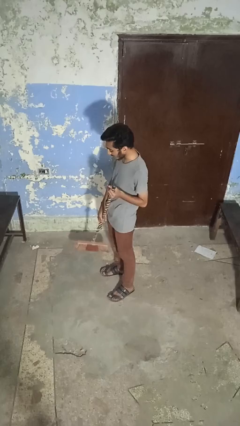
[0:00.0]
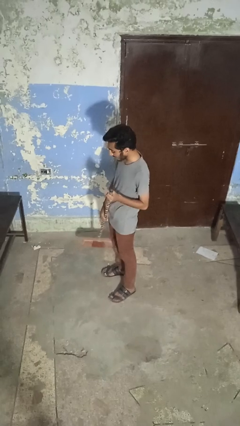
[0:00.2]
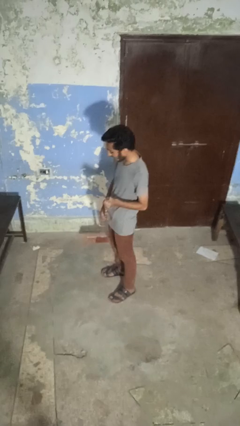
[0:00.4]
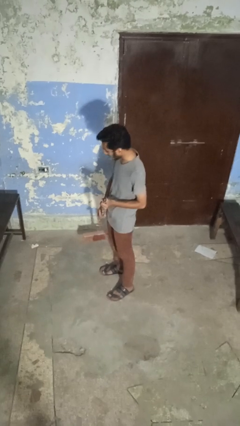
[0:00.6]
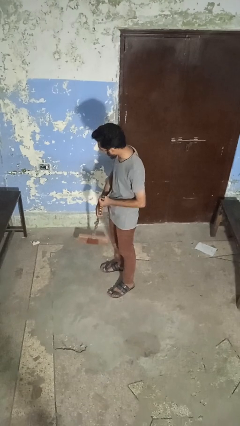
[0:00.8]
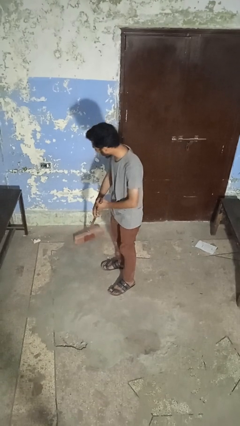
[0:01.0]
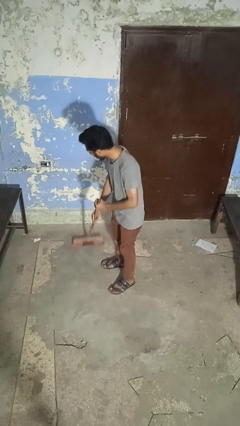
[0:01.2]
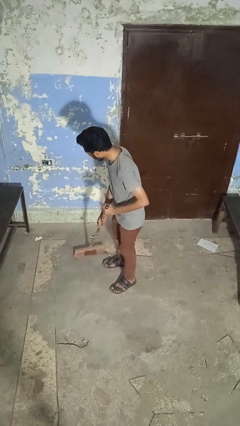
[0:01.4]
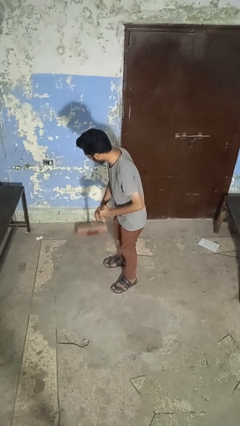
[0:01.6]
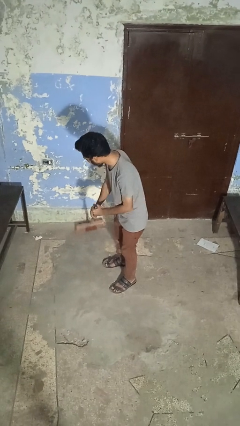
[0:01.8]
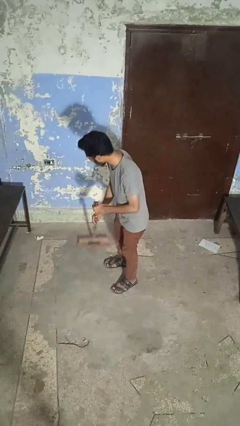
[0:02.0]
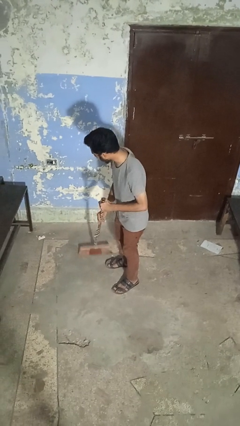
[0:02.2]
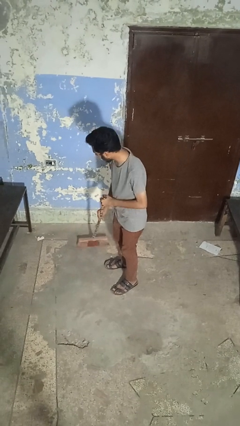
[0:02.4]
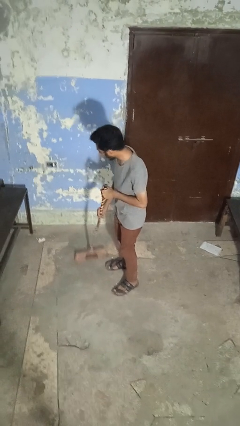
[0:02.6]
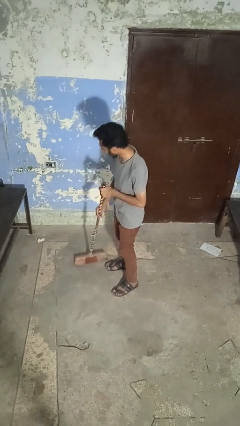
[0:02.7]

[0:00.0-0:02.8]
person sweeps floor

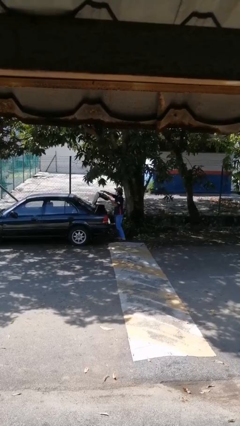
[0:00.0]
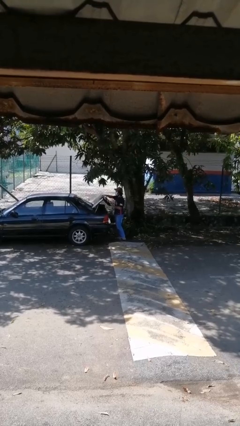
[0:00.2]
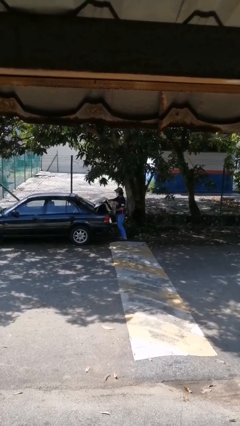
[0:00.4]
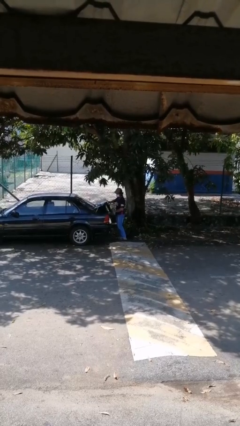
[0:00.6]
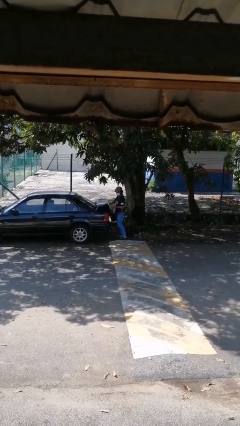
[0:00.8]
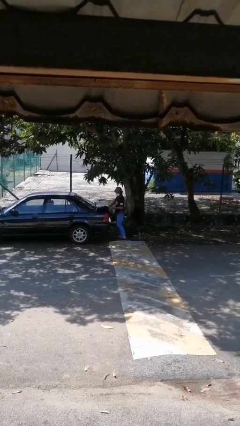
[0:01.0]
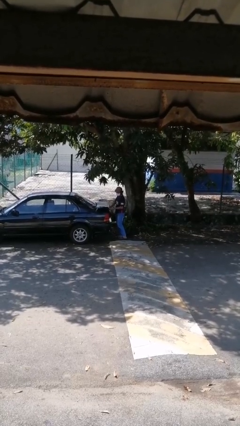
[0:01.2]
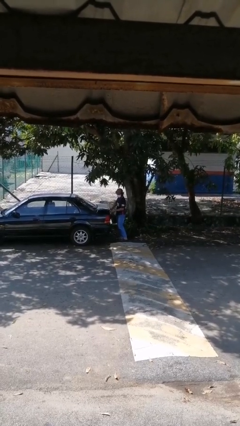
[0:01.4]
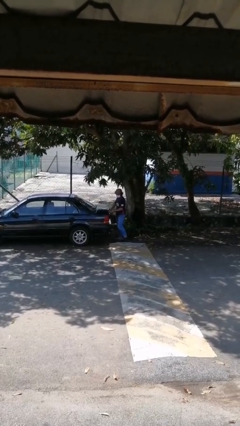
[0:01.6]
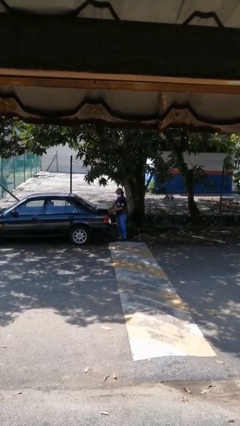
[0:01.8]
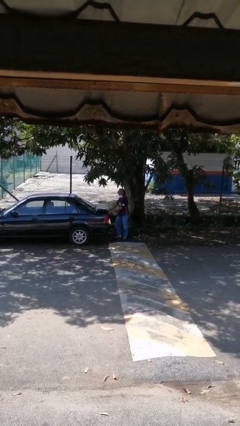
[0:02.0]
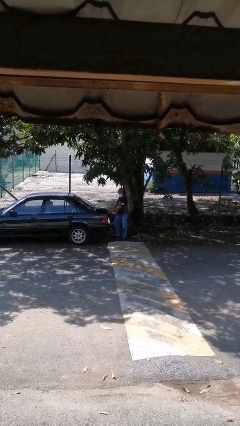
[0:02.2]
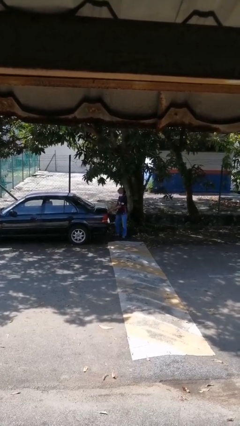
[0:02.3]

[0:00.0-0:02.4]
person closes car trunk

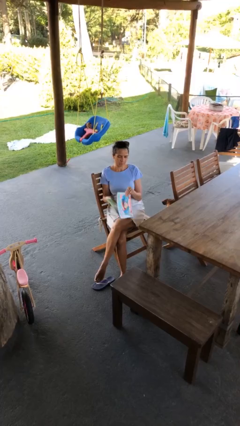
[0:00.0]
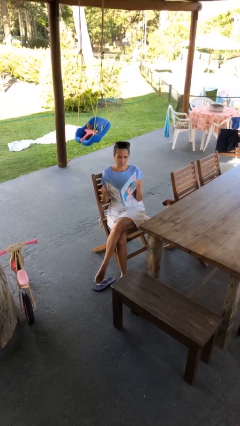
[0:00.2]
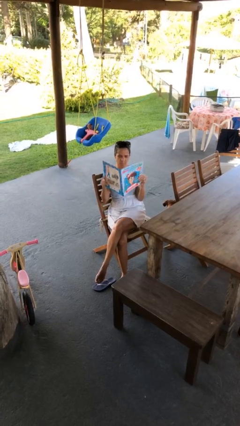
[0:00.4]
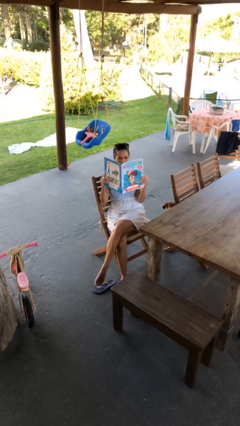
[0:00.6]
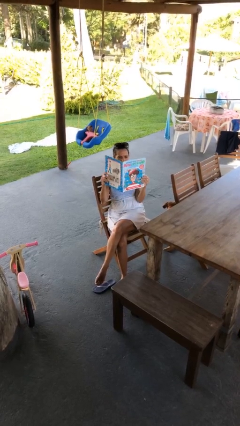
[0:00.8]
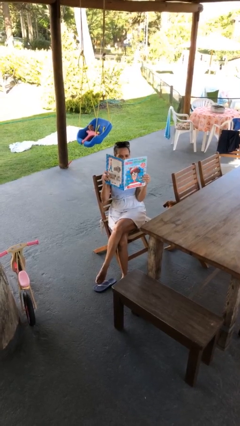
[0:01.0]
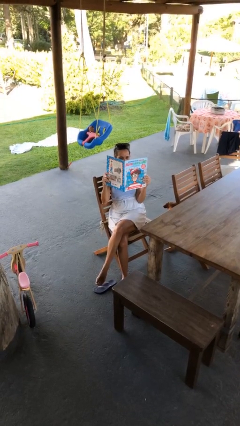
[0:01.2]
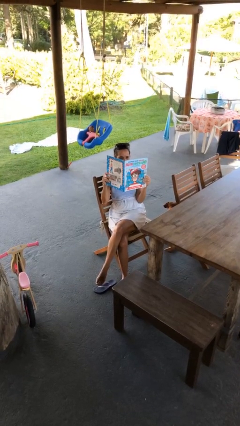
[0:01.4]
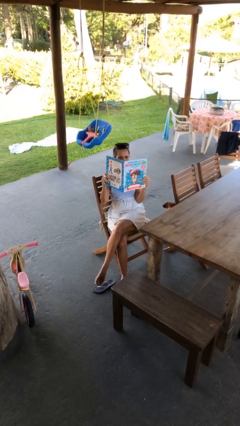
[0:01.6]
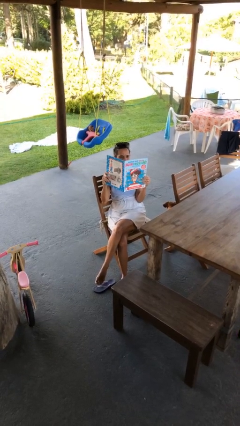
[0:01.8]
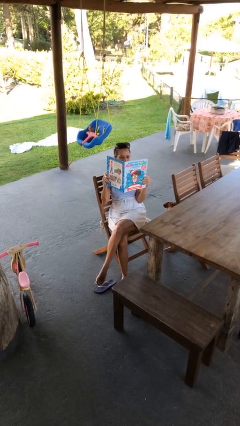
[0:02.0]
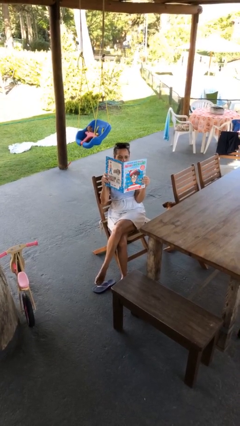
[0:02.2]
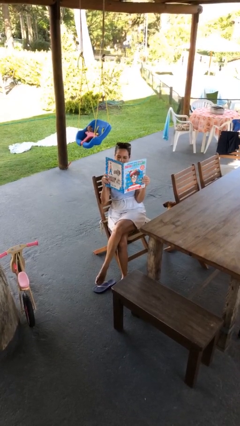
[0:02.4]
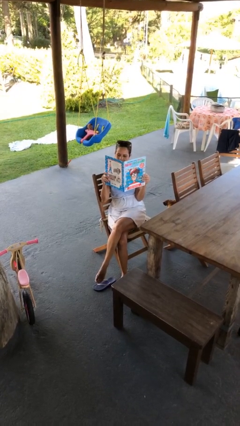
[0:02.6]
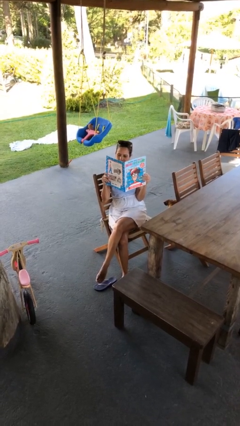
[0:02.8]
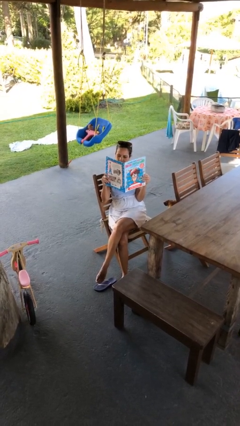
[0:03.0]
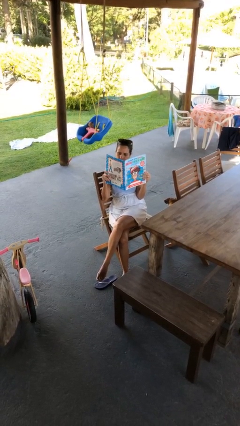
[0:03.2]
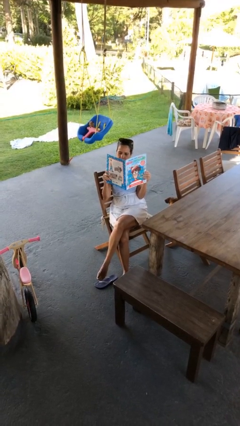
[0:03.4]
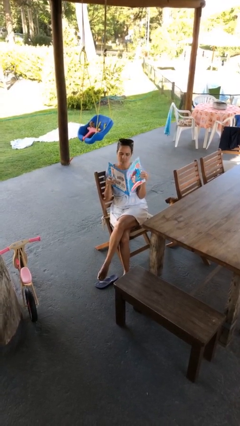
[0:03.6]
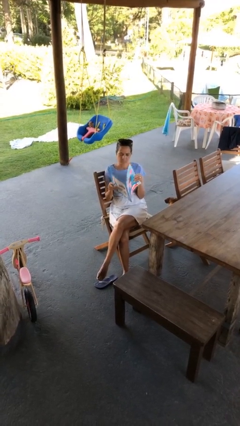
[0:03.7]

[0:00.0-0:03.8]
person reads document

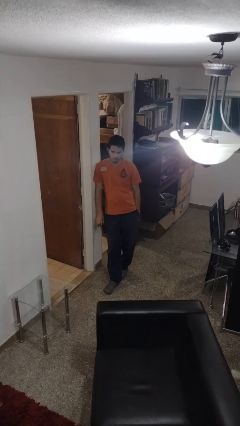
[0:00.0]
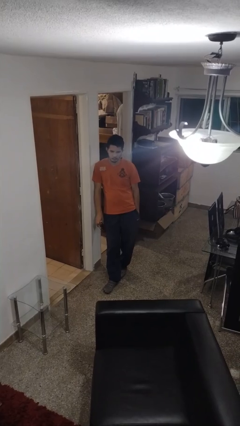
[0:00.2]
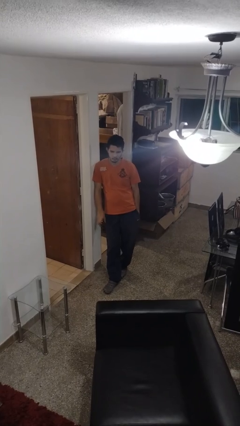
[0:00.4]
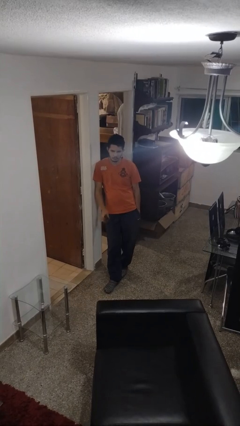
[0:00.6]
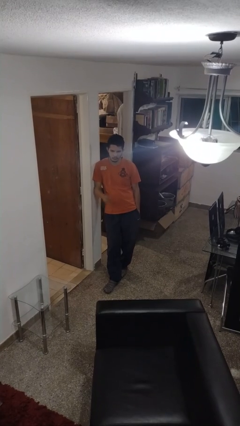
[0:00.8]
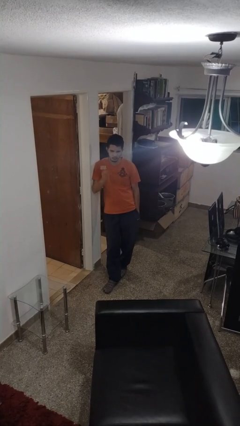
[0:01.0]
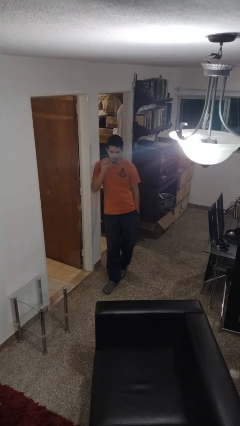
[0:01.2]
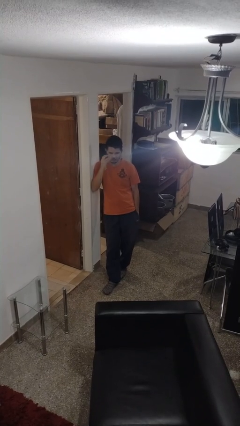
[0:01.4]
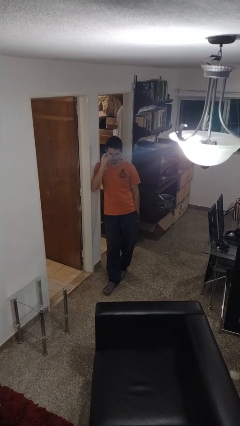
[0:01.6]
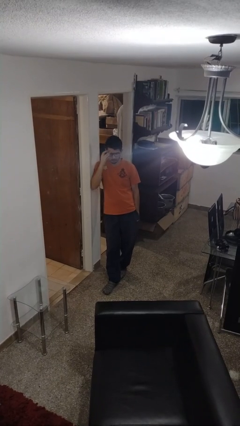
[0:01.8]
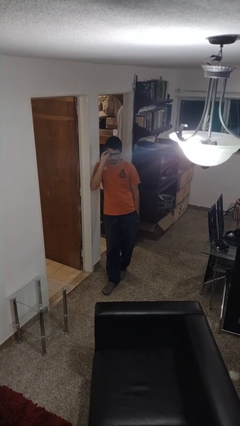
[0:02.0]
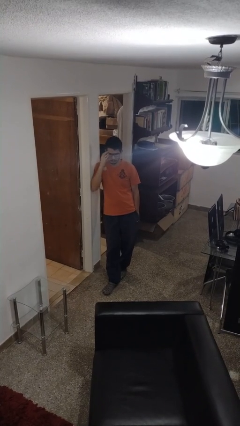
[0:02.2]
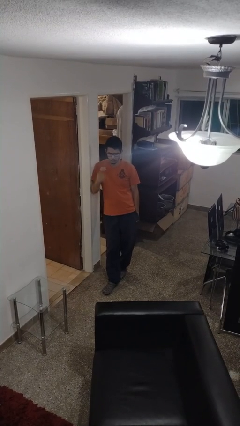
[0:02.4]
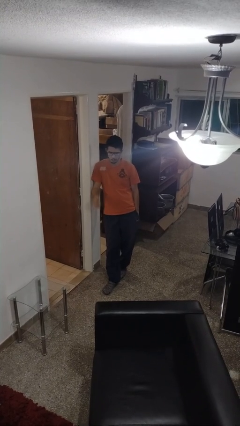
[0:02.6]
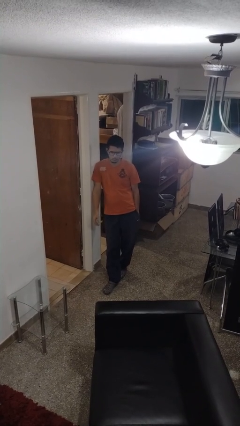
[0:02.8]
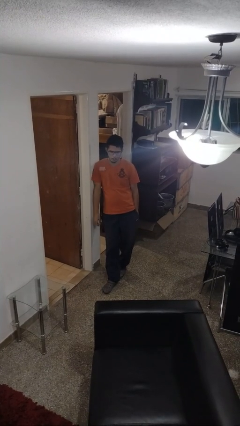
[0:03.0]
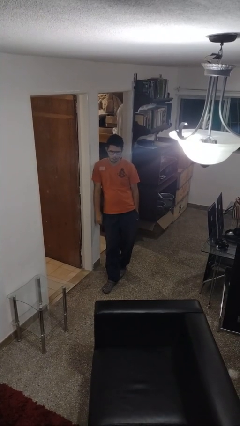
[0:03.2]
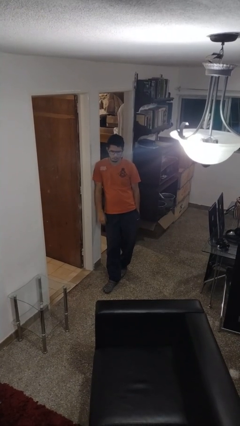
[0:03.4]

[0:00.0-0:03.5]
person puts on glasses

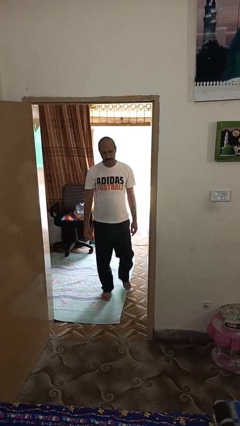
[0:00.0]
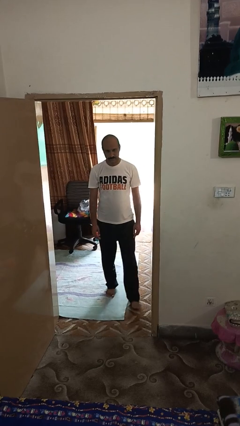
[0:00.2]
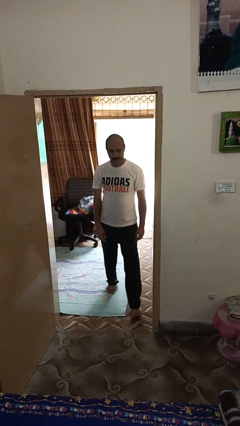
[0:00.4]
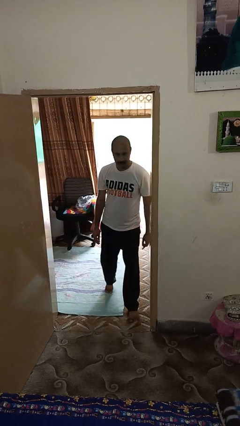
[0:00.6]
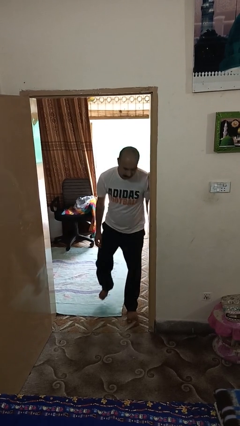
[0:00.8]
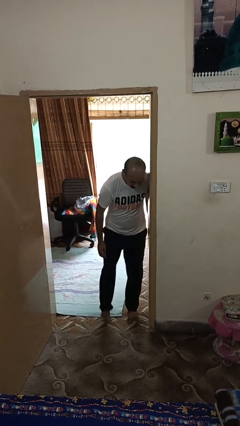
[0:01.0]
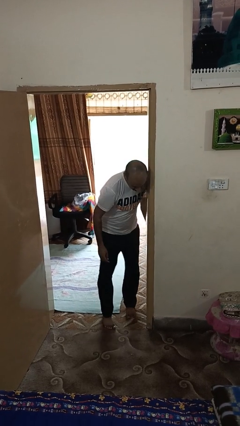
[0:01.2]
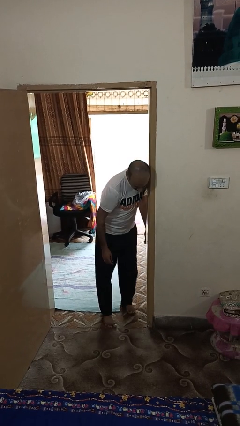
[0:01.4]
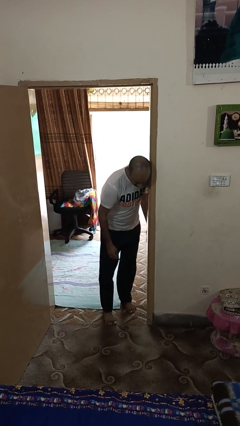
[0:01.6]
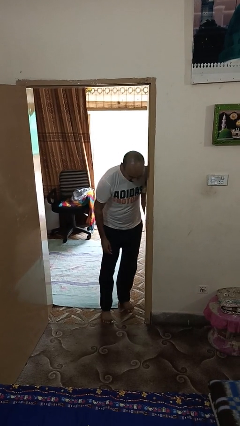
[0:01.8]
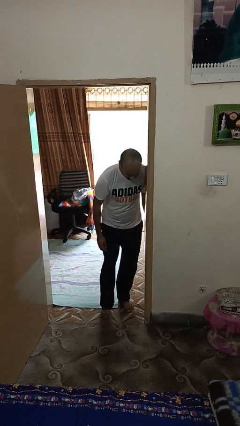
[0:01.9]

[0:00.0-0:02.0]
person bumps into wall

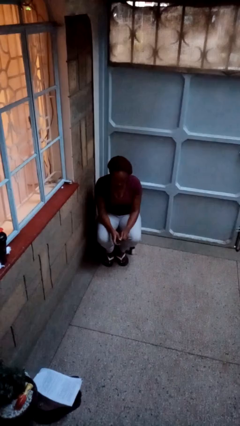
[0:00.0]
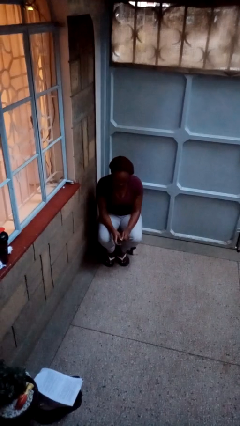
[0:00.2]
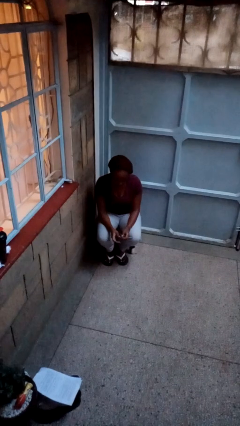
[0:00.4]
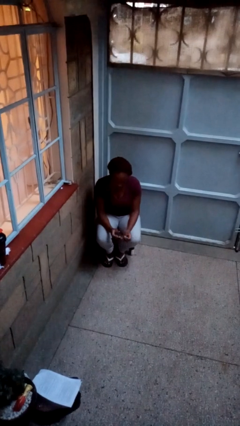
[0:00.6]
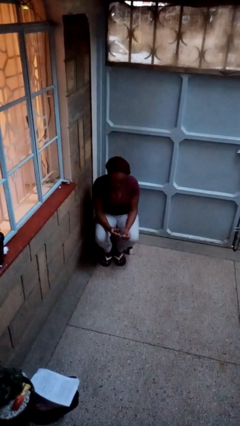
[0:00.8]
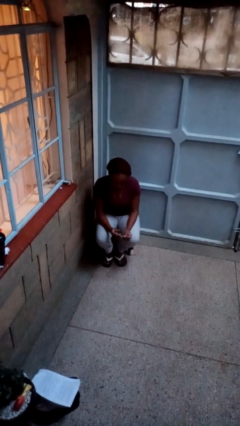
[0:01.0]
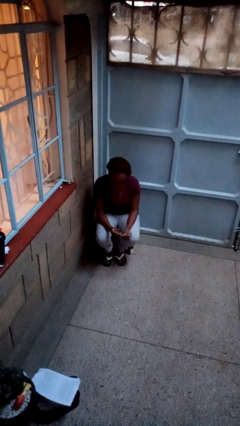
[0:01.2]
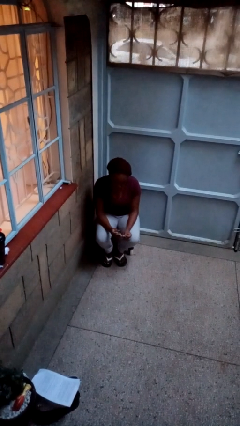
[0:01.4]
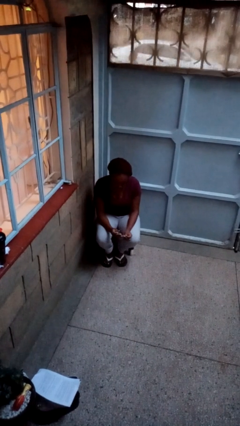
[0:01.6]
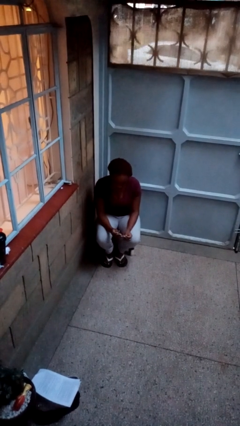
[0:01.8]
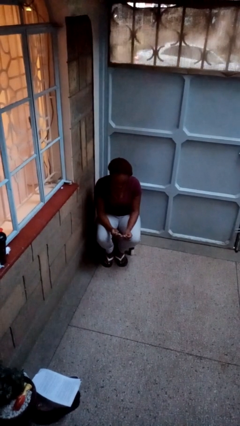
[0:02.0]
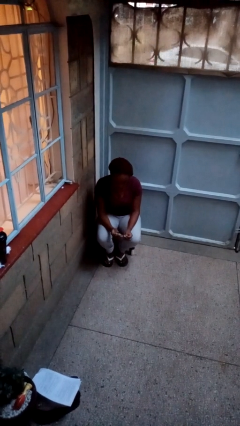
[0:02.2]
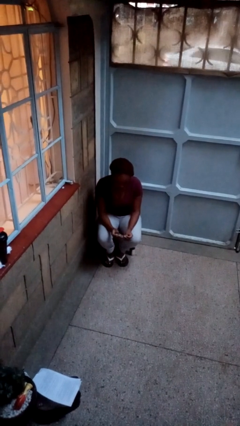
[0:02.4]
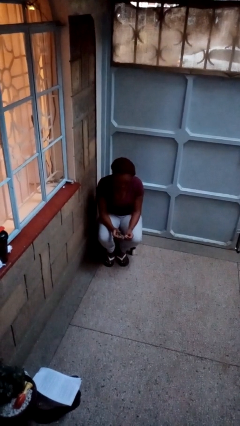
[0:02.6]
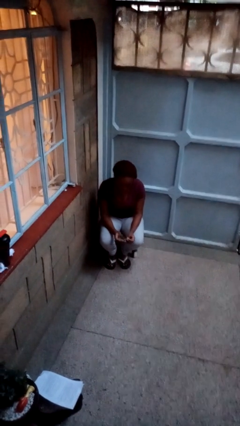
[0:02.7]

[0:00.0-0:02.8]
person clips fingernails
